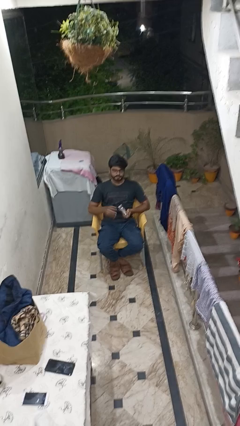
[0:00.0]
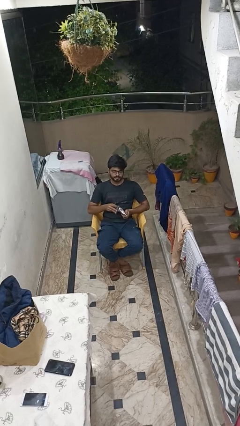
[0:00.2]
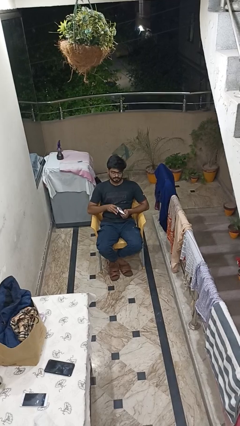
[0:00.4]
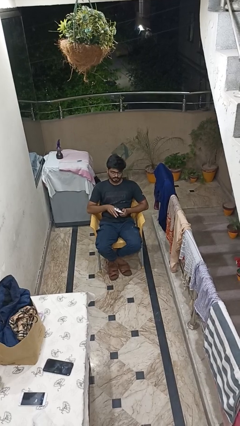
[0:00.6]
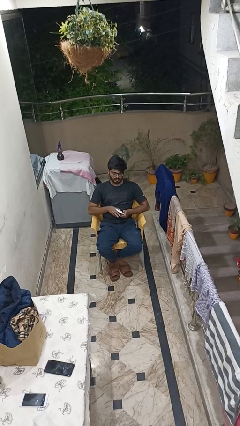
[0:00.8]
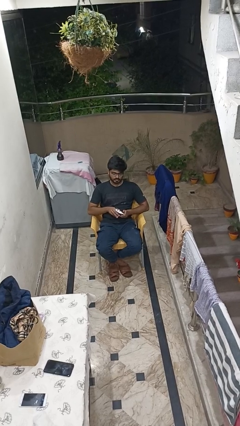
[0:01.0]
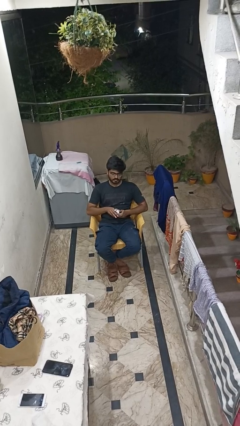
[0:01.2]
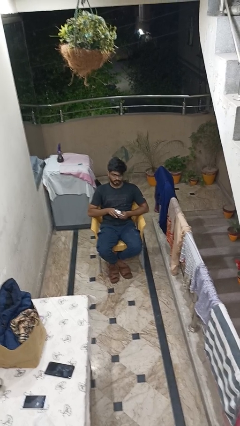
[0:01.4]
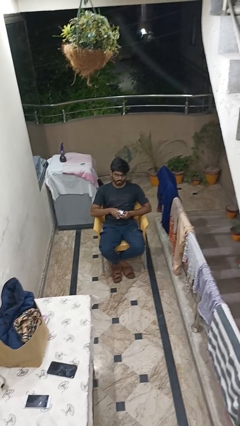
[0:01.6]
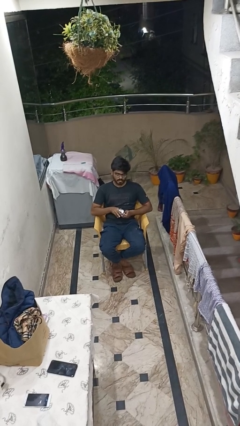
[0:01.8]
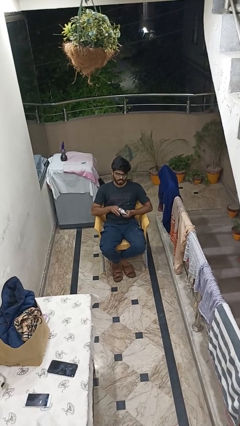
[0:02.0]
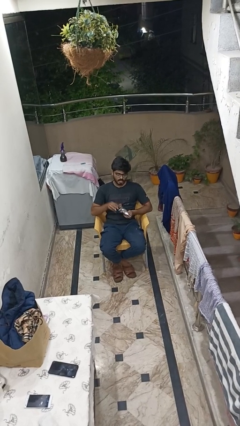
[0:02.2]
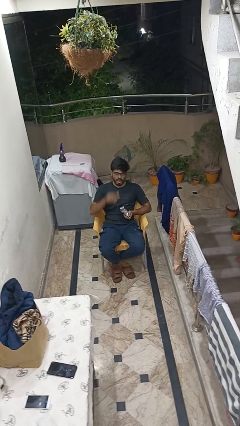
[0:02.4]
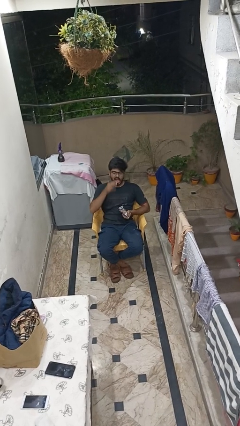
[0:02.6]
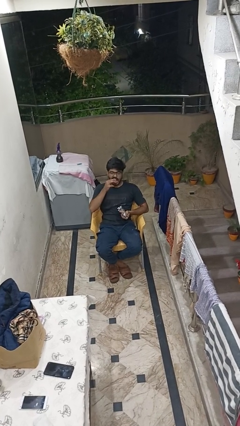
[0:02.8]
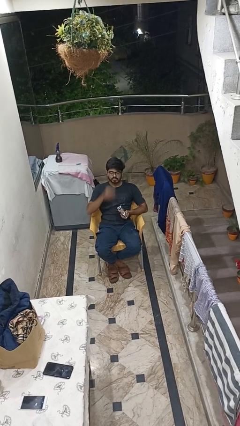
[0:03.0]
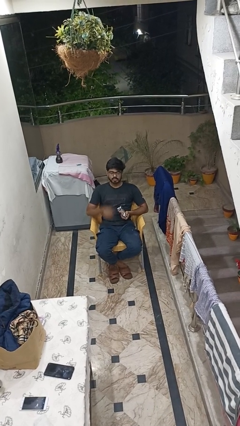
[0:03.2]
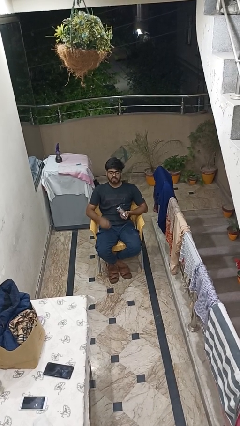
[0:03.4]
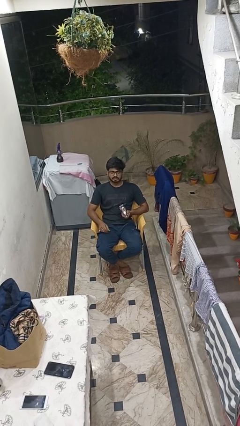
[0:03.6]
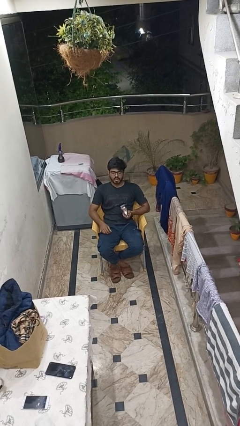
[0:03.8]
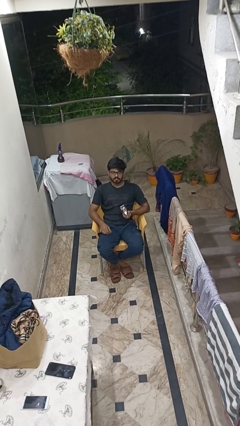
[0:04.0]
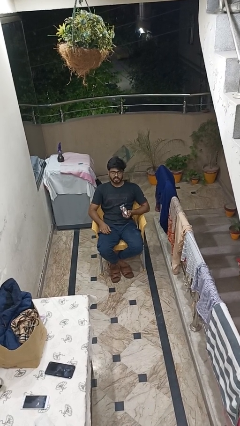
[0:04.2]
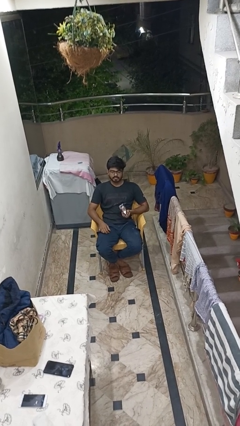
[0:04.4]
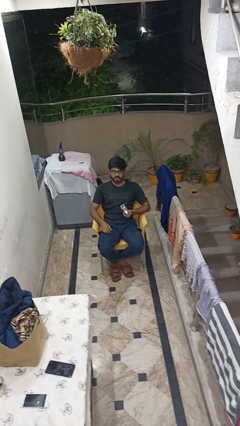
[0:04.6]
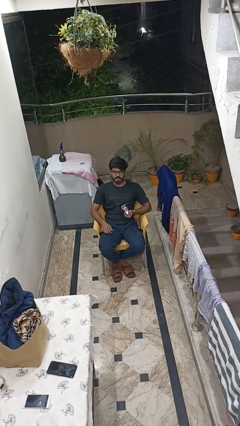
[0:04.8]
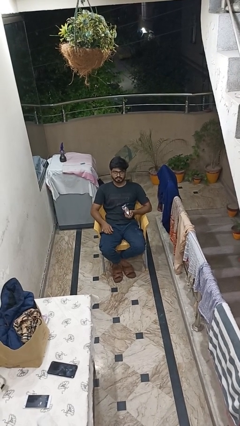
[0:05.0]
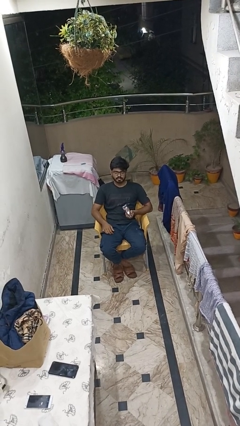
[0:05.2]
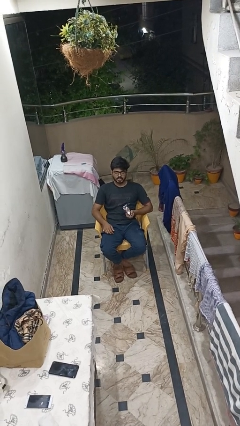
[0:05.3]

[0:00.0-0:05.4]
person eats snack from bag

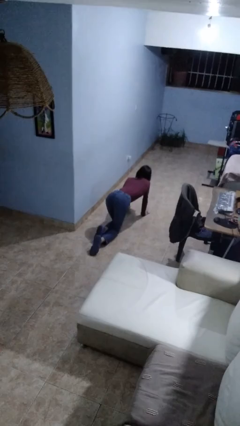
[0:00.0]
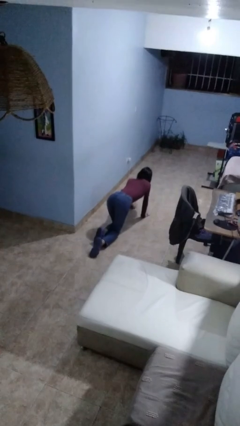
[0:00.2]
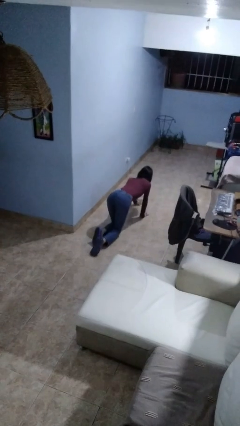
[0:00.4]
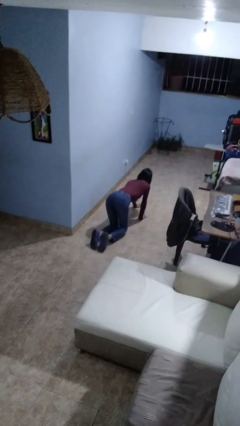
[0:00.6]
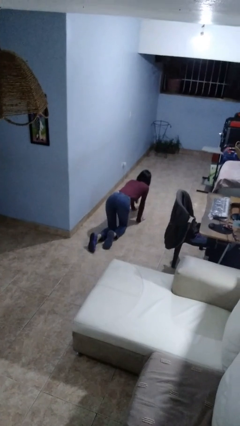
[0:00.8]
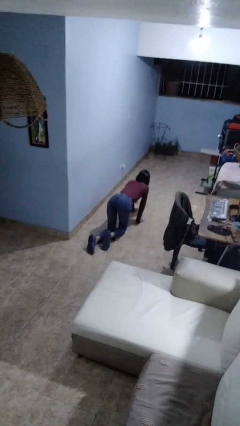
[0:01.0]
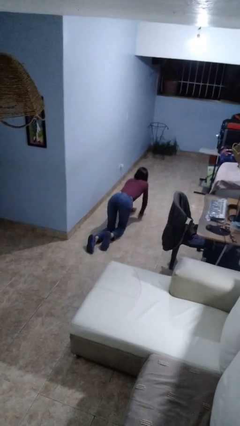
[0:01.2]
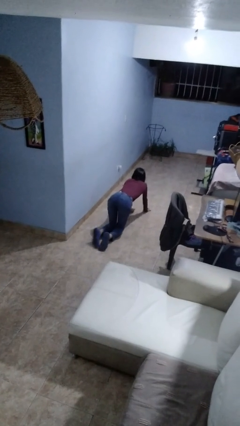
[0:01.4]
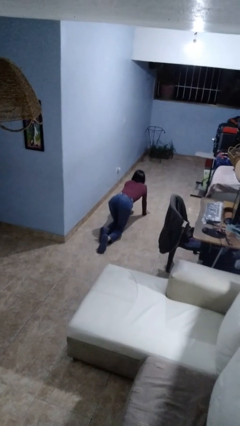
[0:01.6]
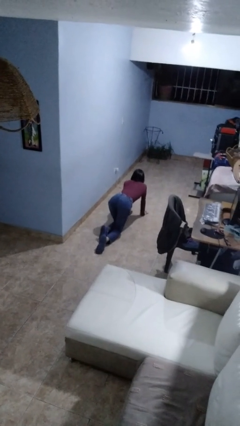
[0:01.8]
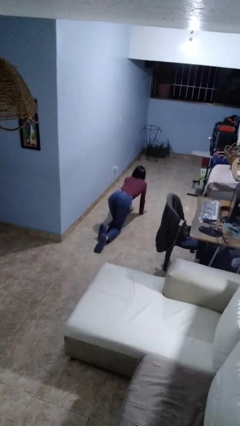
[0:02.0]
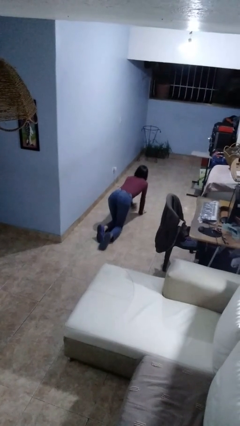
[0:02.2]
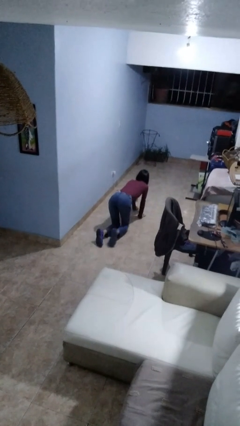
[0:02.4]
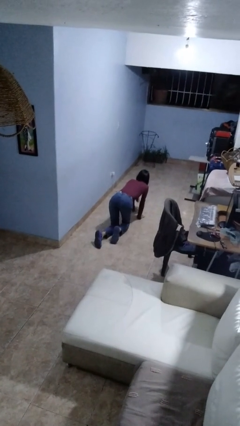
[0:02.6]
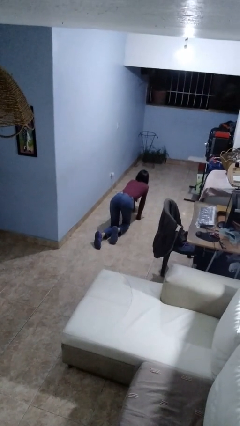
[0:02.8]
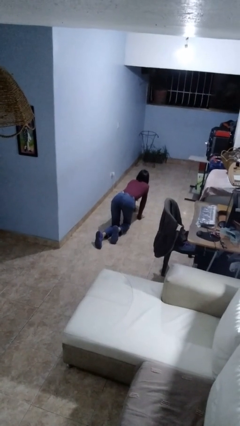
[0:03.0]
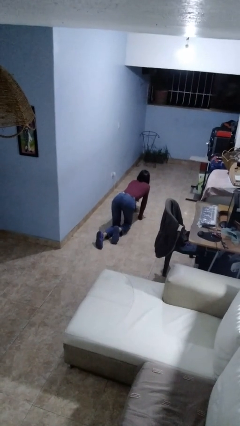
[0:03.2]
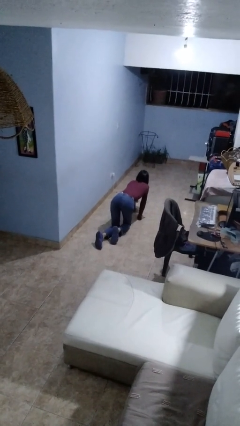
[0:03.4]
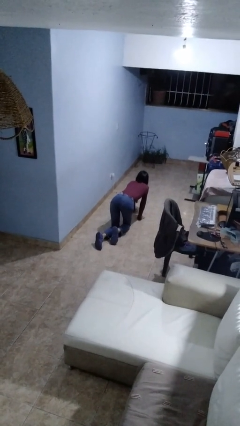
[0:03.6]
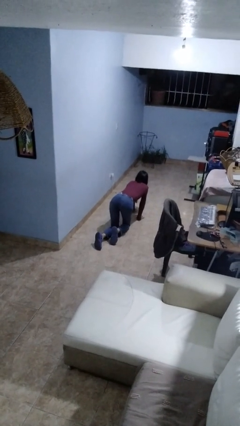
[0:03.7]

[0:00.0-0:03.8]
person crawls

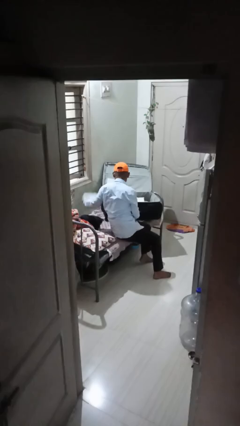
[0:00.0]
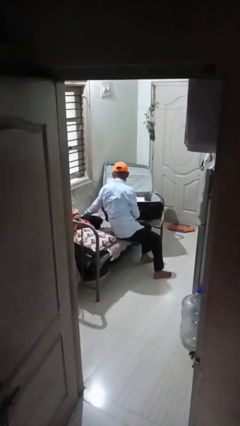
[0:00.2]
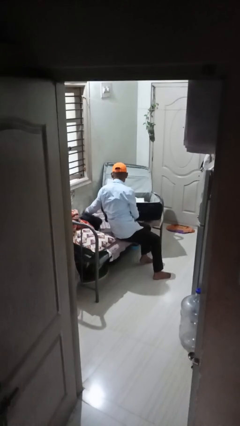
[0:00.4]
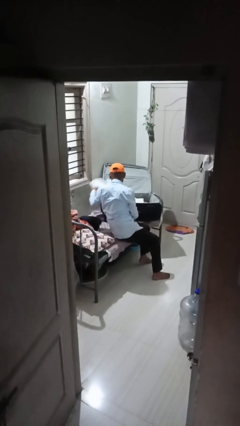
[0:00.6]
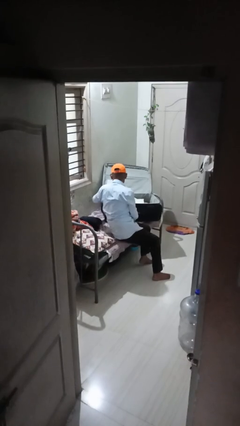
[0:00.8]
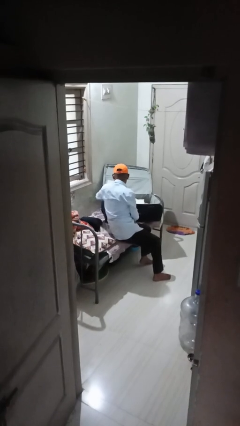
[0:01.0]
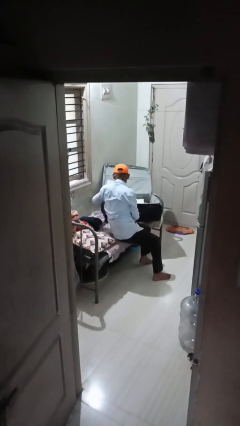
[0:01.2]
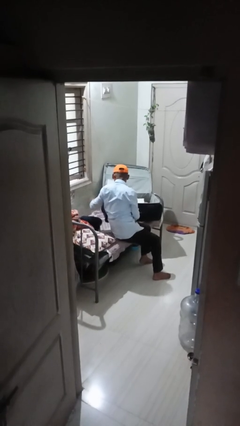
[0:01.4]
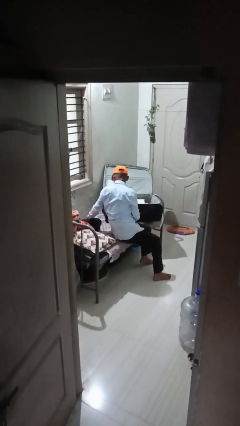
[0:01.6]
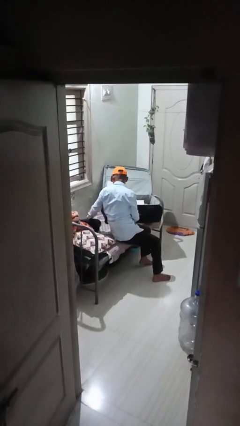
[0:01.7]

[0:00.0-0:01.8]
person loads clothes into suitcase

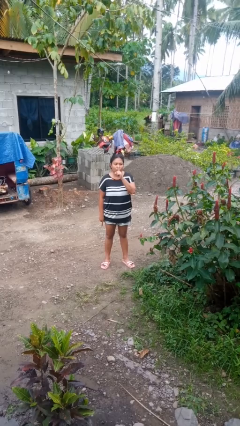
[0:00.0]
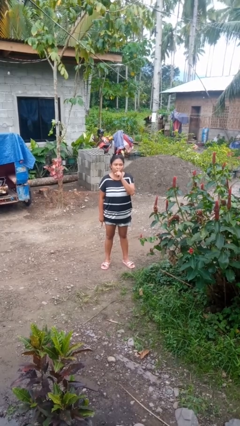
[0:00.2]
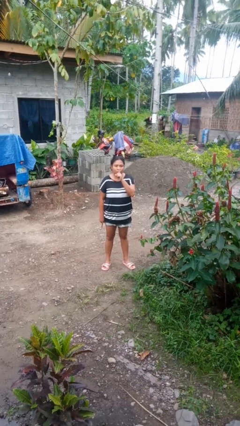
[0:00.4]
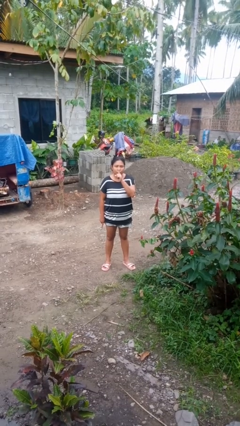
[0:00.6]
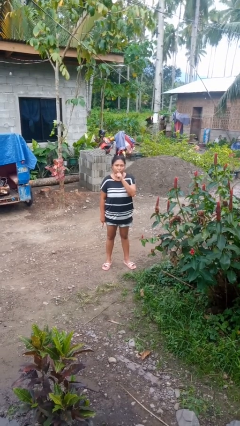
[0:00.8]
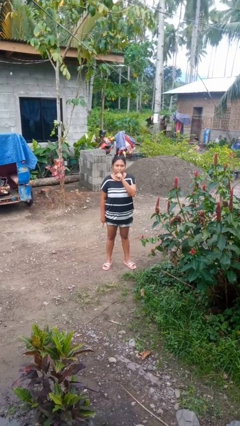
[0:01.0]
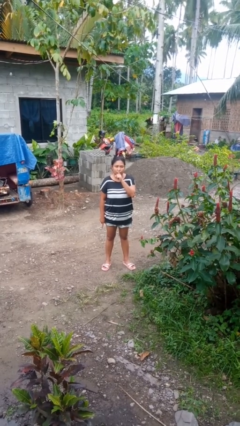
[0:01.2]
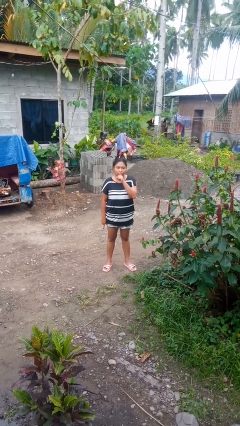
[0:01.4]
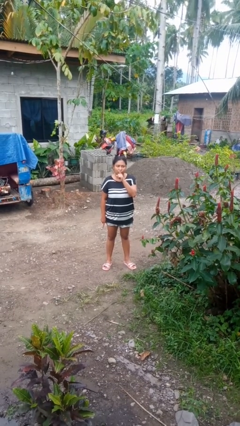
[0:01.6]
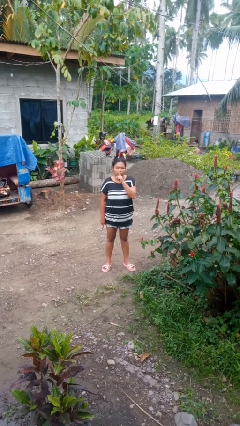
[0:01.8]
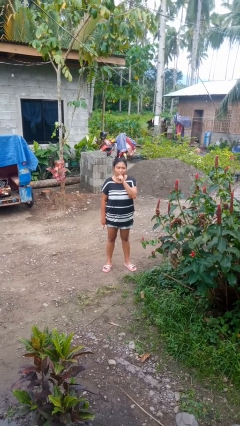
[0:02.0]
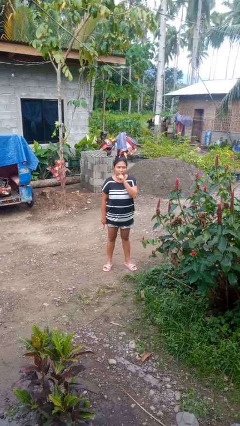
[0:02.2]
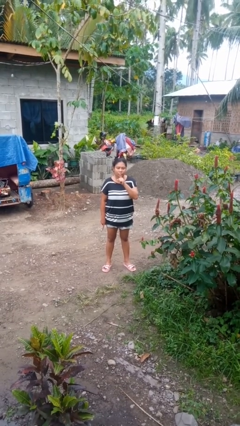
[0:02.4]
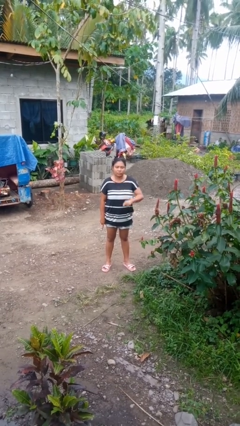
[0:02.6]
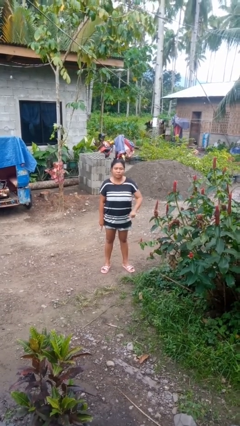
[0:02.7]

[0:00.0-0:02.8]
person gestures be quiet

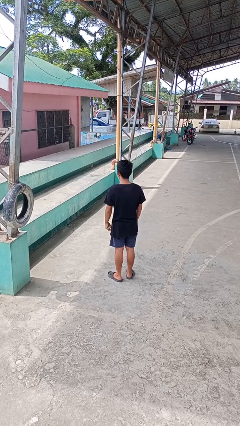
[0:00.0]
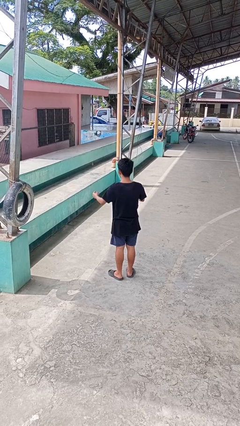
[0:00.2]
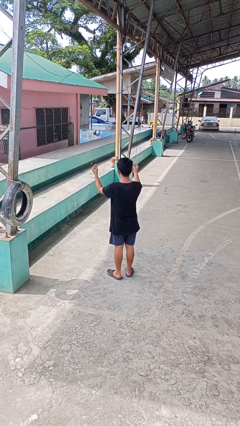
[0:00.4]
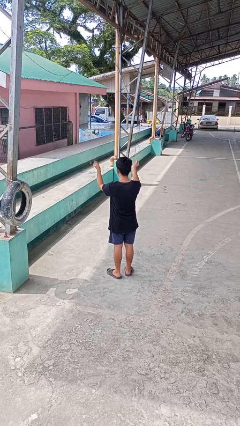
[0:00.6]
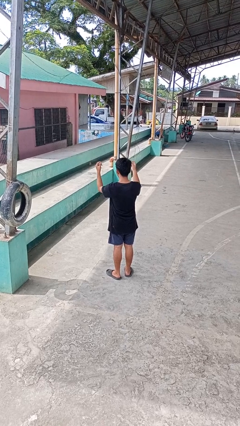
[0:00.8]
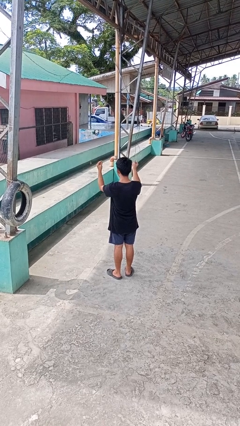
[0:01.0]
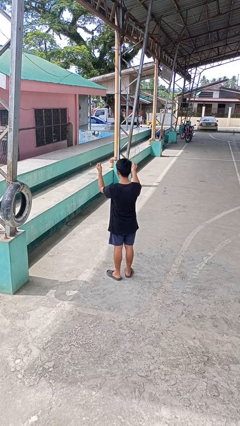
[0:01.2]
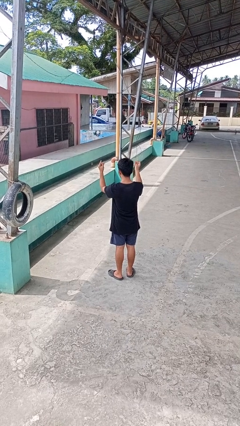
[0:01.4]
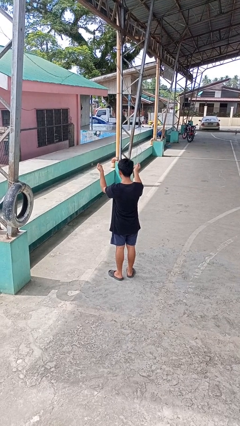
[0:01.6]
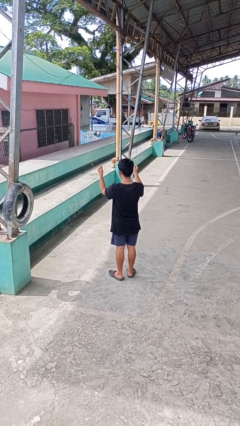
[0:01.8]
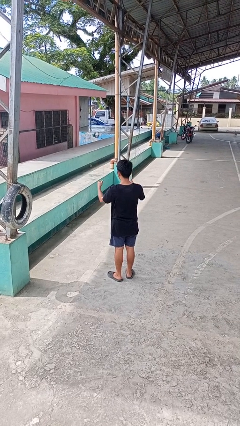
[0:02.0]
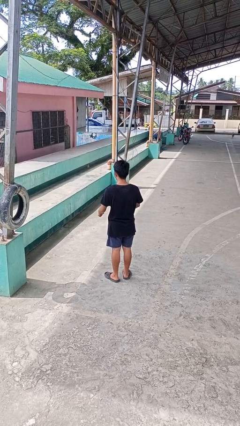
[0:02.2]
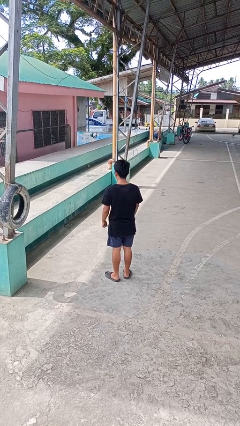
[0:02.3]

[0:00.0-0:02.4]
person snaps fingers

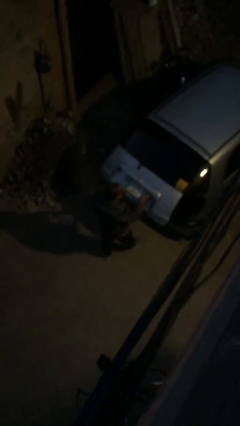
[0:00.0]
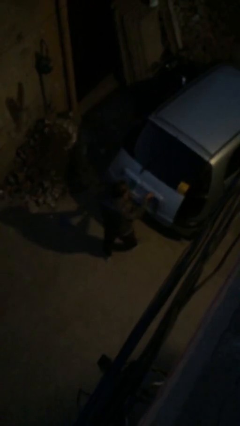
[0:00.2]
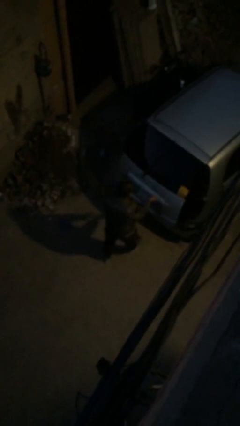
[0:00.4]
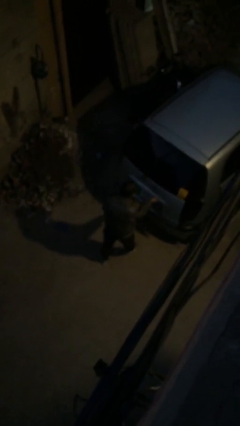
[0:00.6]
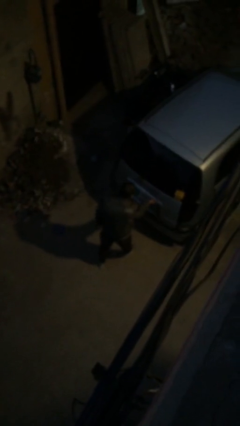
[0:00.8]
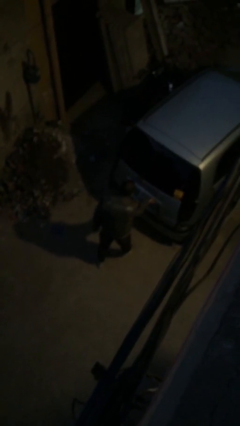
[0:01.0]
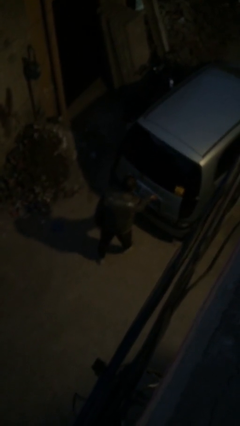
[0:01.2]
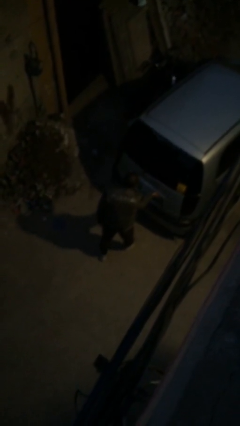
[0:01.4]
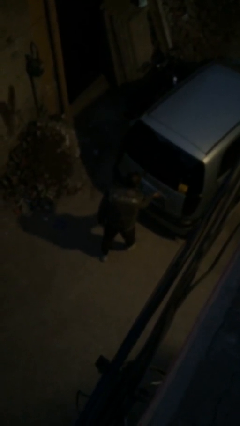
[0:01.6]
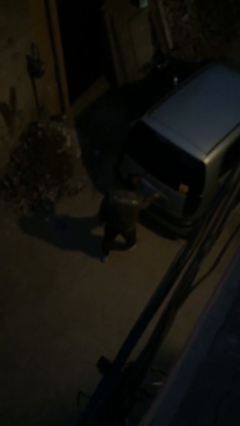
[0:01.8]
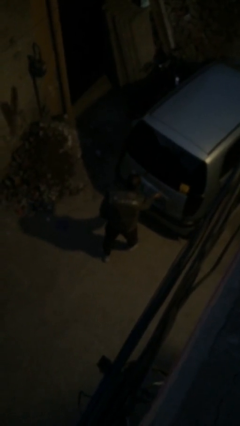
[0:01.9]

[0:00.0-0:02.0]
person closes car trunk
